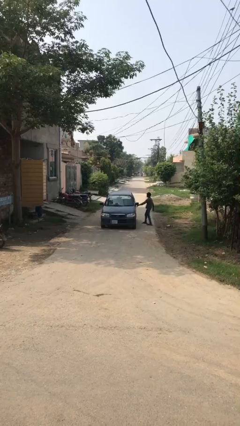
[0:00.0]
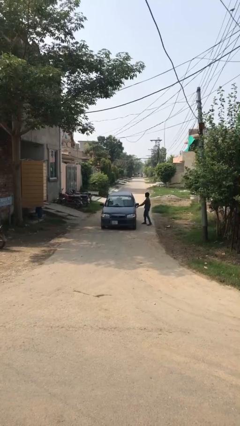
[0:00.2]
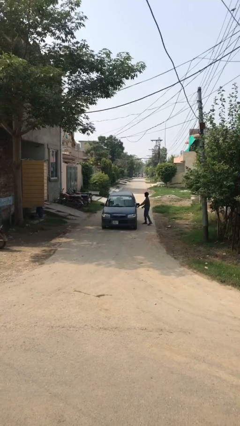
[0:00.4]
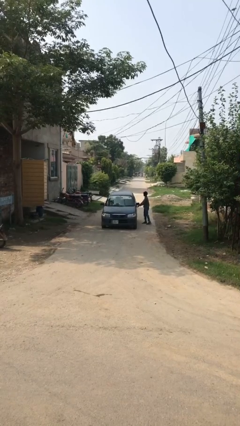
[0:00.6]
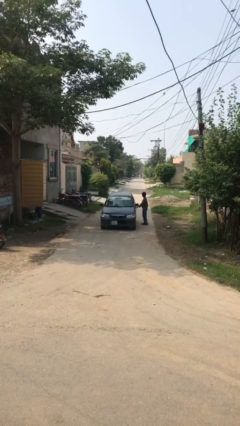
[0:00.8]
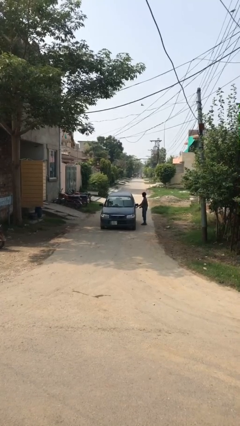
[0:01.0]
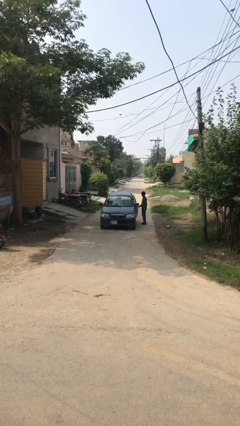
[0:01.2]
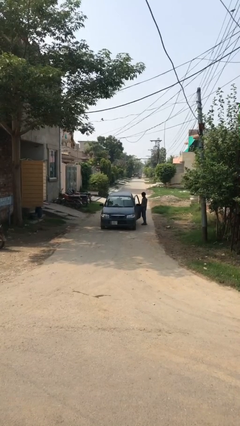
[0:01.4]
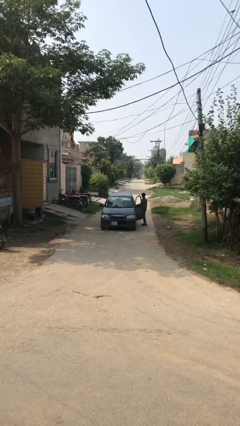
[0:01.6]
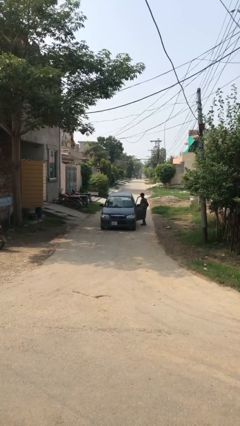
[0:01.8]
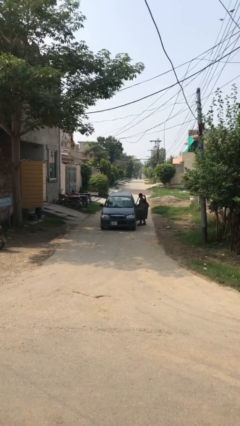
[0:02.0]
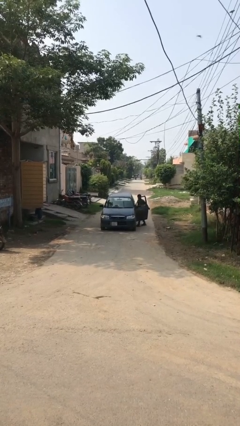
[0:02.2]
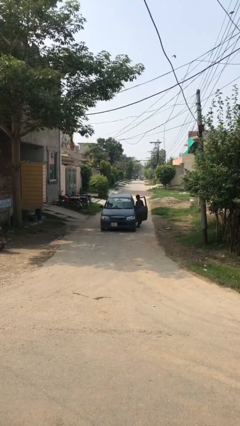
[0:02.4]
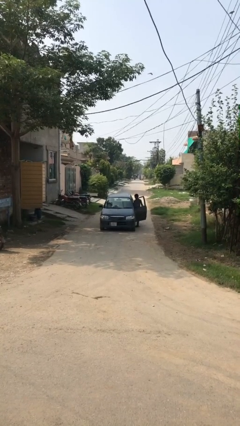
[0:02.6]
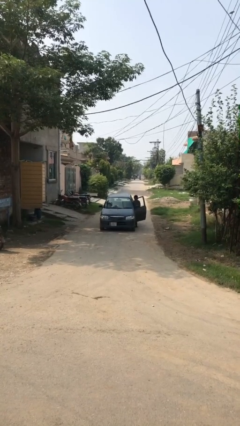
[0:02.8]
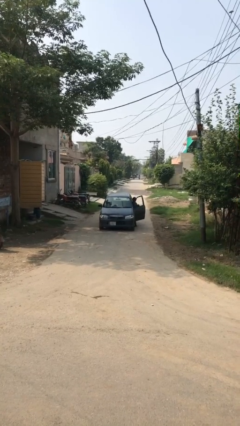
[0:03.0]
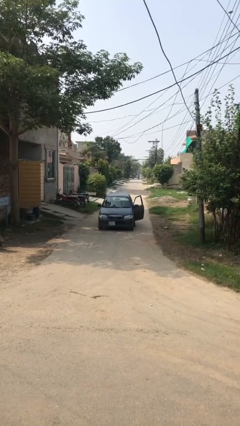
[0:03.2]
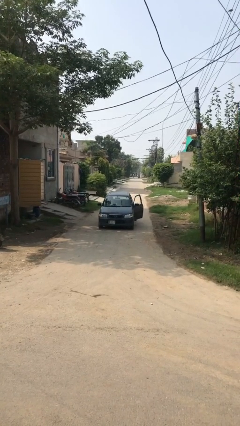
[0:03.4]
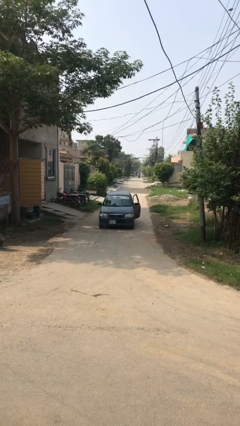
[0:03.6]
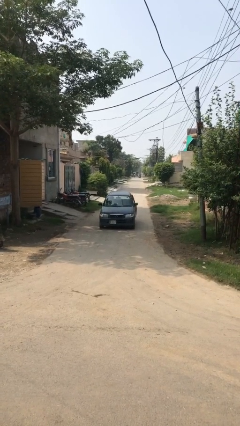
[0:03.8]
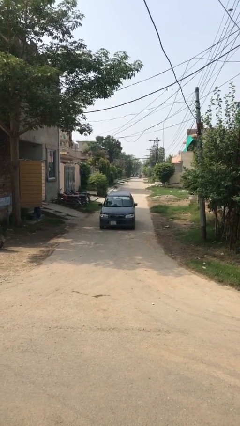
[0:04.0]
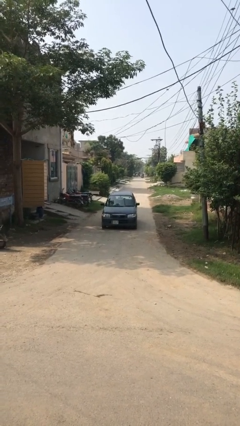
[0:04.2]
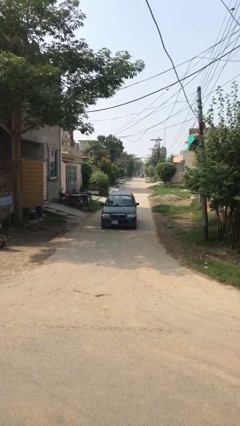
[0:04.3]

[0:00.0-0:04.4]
car picks up person

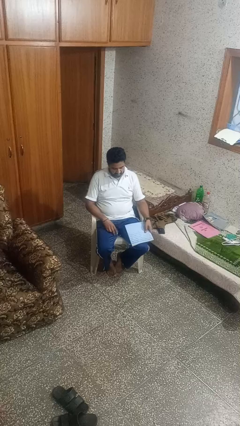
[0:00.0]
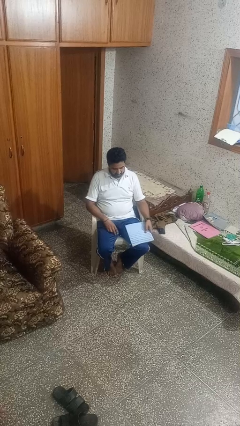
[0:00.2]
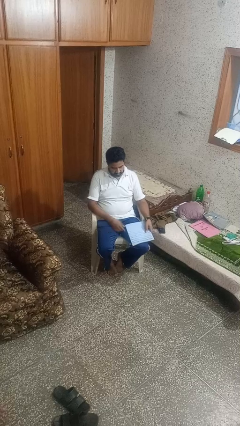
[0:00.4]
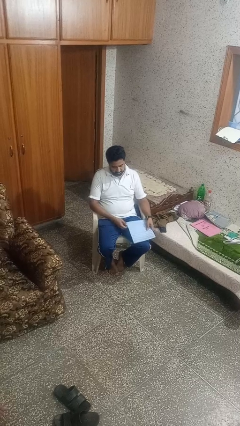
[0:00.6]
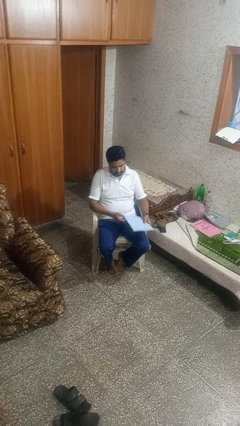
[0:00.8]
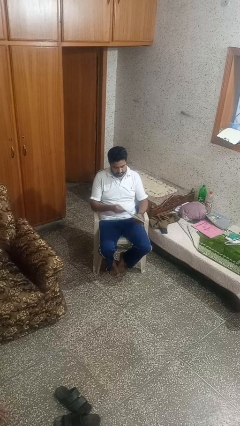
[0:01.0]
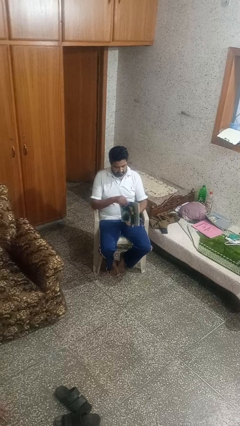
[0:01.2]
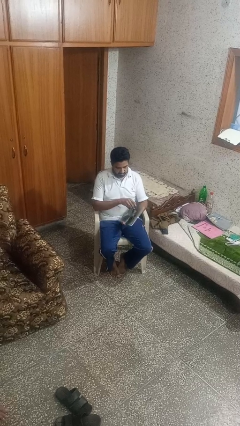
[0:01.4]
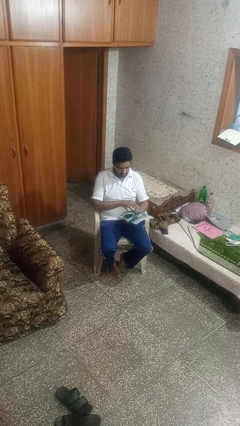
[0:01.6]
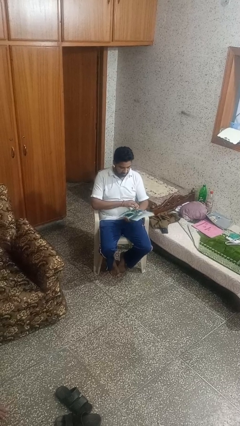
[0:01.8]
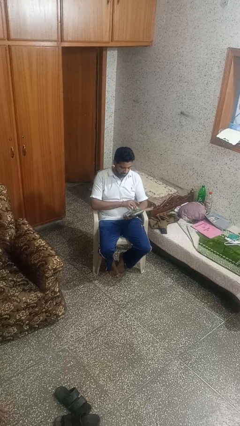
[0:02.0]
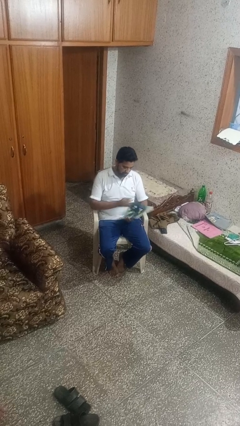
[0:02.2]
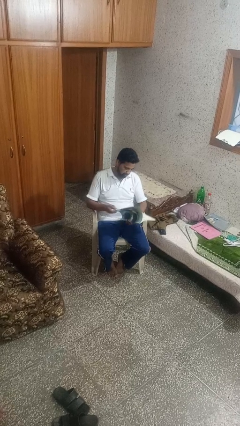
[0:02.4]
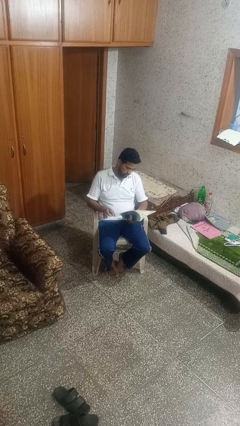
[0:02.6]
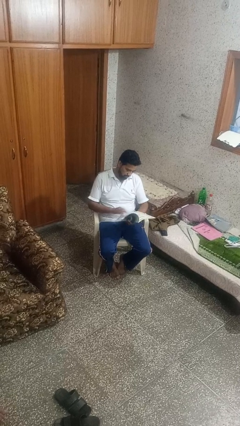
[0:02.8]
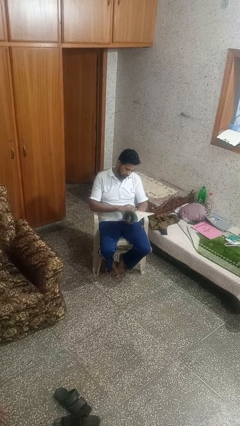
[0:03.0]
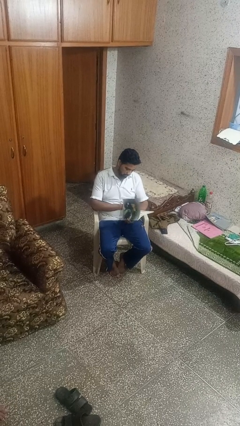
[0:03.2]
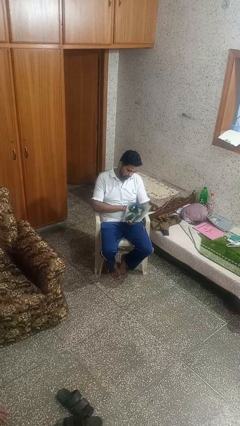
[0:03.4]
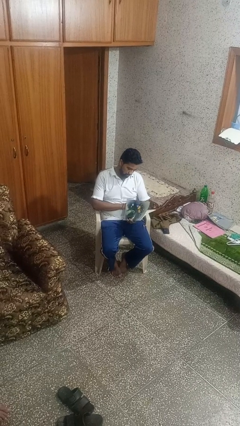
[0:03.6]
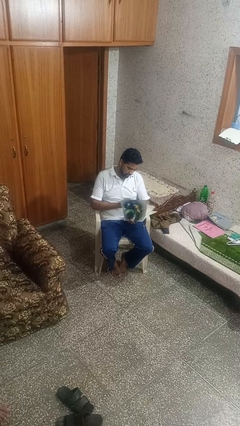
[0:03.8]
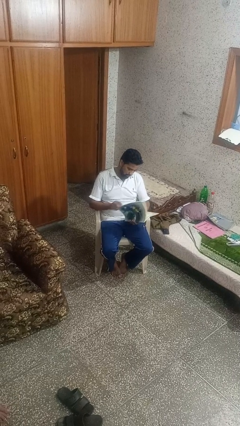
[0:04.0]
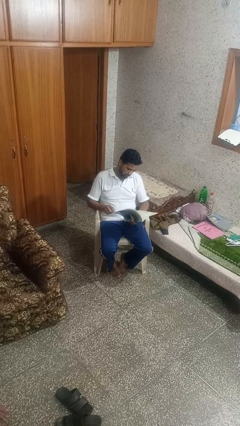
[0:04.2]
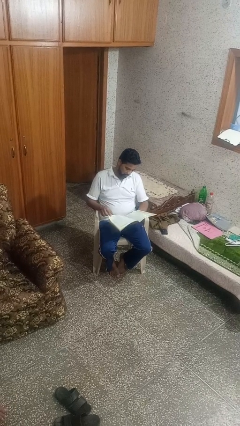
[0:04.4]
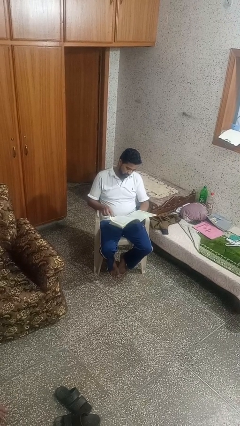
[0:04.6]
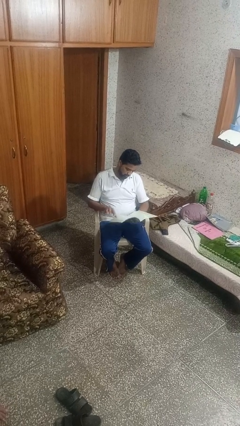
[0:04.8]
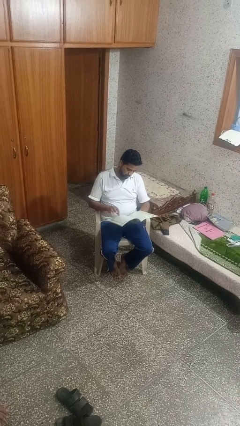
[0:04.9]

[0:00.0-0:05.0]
person reads magazine

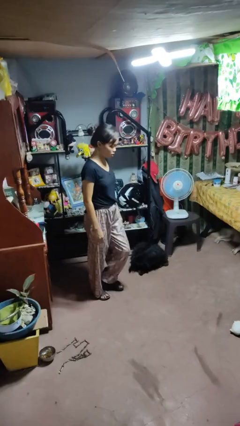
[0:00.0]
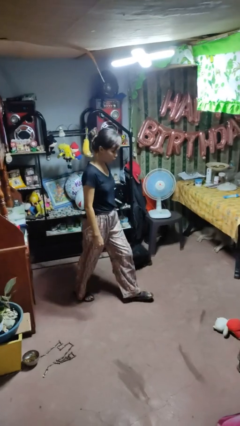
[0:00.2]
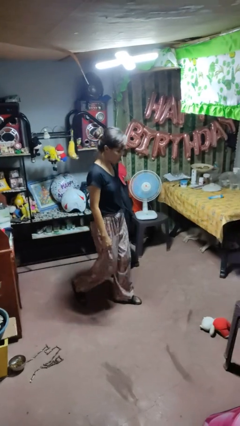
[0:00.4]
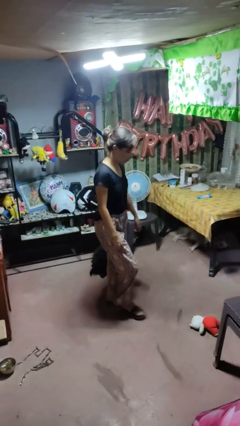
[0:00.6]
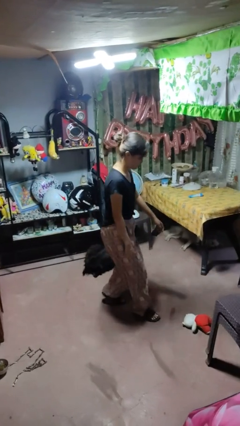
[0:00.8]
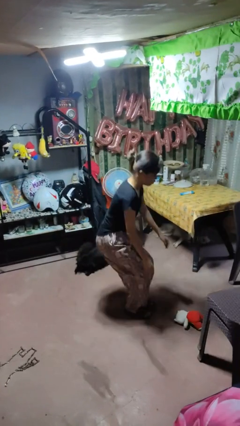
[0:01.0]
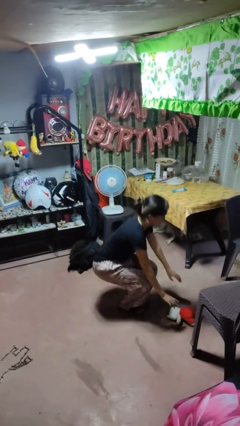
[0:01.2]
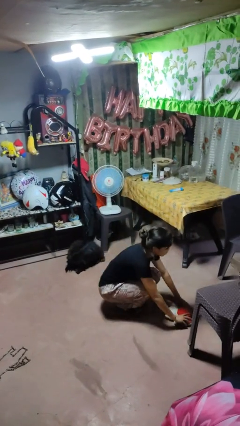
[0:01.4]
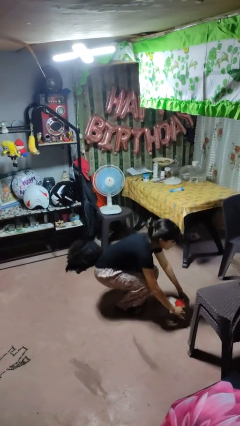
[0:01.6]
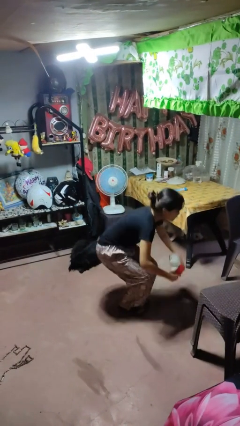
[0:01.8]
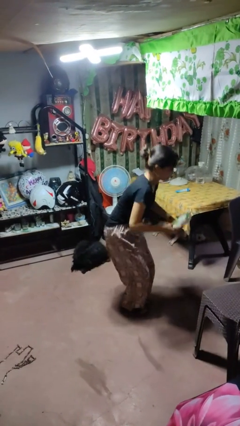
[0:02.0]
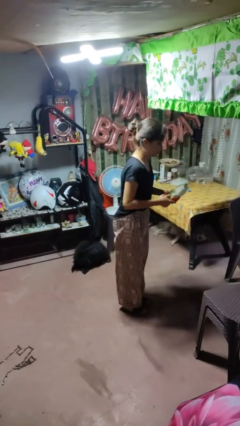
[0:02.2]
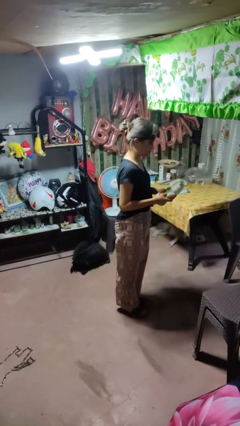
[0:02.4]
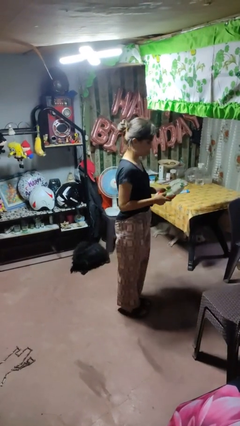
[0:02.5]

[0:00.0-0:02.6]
person picks up object from floor

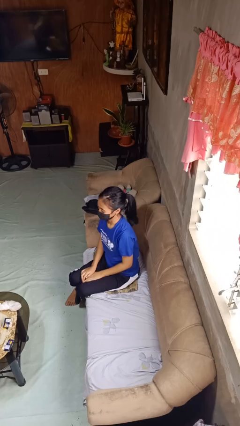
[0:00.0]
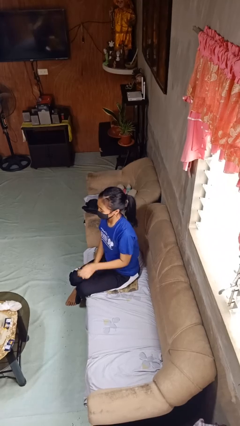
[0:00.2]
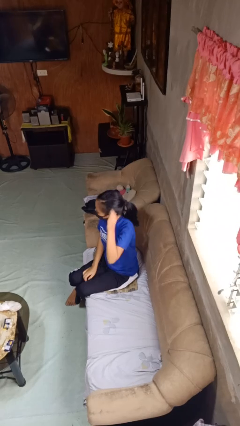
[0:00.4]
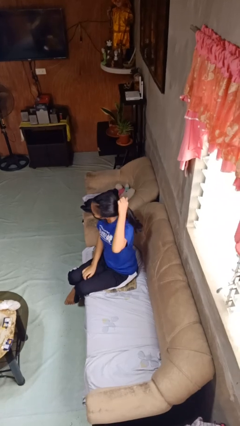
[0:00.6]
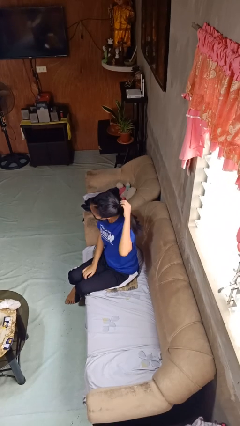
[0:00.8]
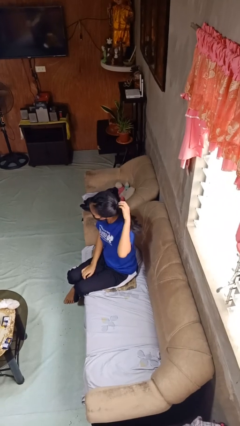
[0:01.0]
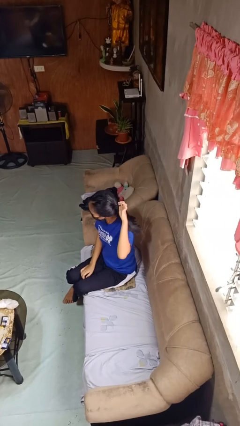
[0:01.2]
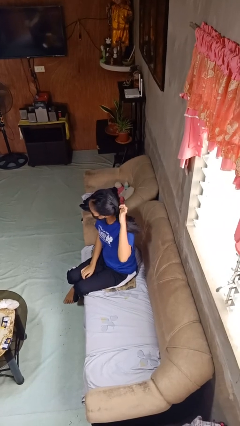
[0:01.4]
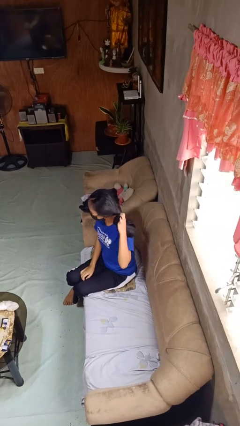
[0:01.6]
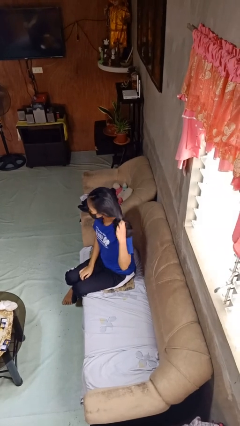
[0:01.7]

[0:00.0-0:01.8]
person takes off hairtie

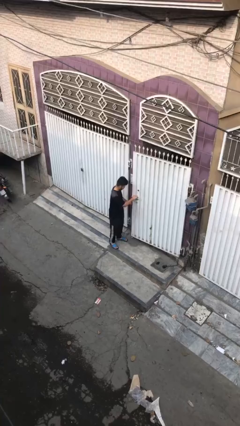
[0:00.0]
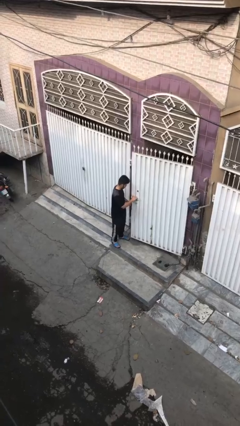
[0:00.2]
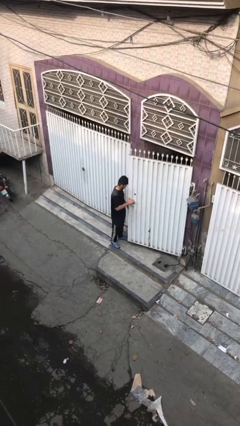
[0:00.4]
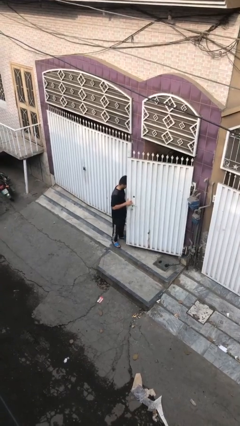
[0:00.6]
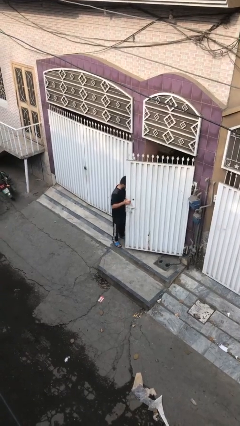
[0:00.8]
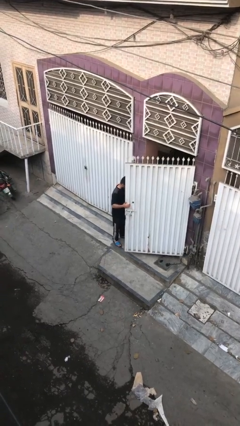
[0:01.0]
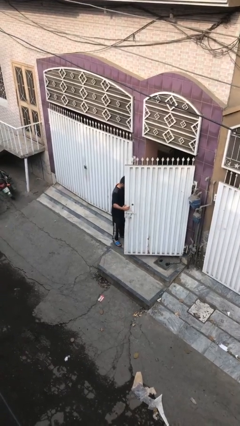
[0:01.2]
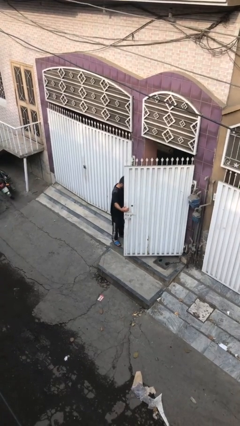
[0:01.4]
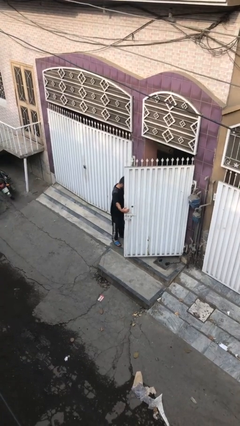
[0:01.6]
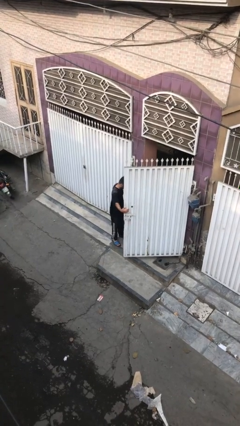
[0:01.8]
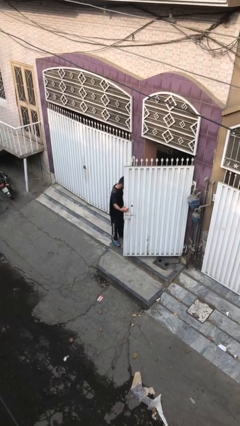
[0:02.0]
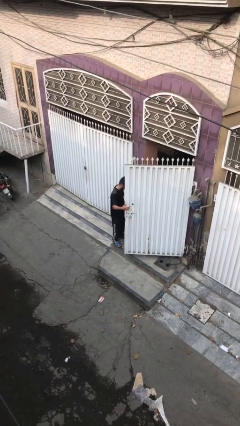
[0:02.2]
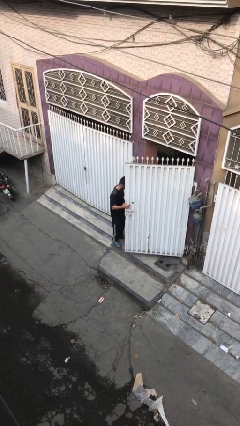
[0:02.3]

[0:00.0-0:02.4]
person opens facility door

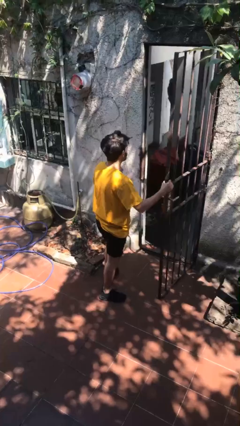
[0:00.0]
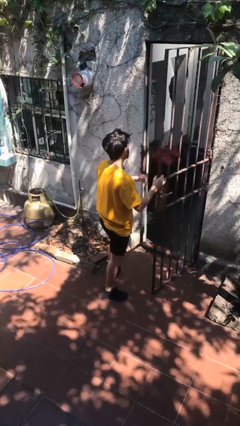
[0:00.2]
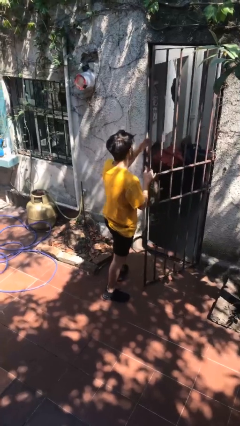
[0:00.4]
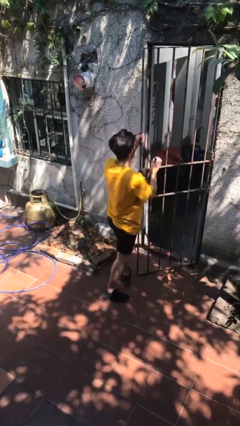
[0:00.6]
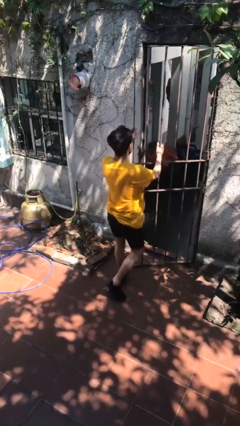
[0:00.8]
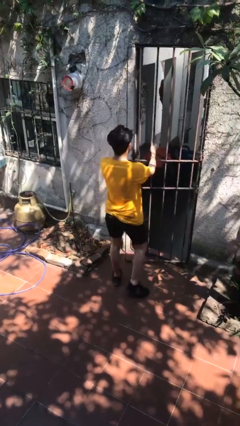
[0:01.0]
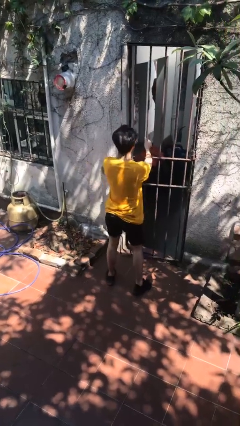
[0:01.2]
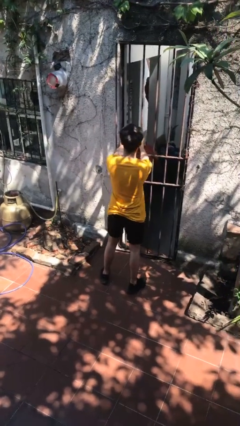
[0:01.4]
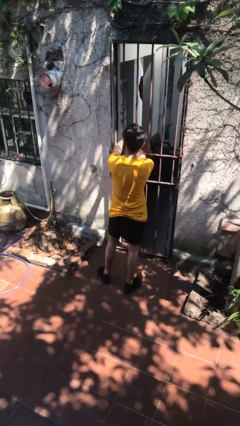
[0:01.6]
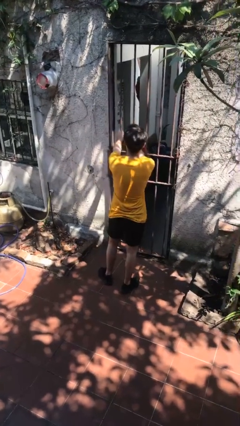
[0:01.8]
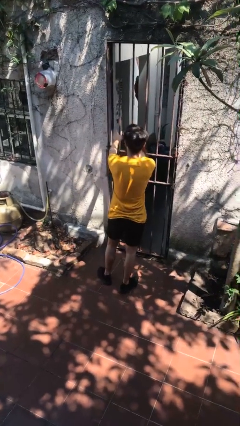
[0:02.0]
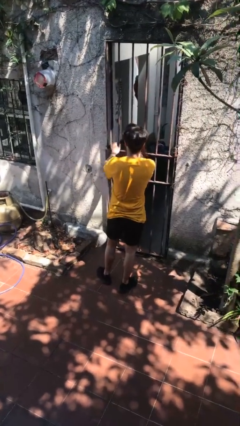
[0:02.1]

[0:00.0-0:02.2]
person closes facility door
